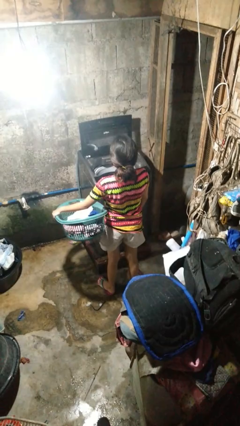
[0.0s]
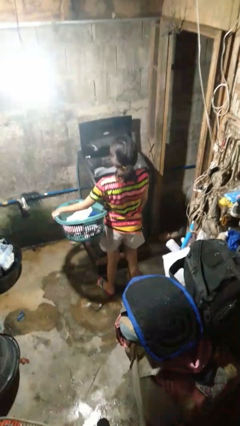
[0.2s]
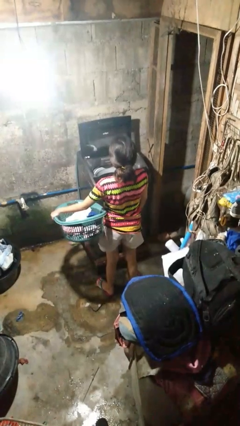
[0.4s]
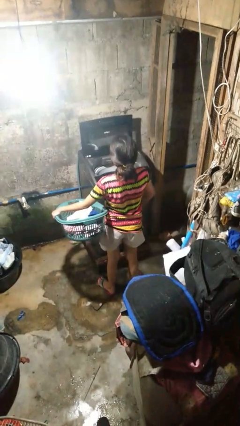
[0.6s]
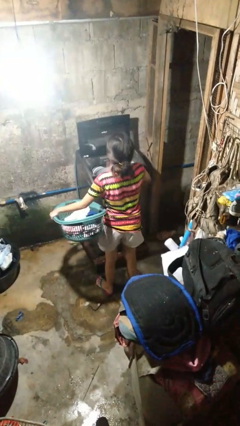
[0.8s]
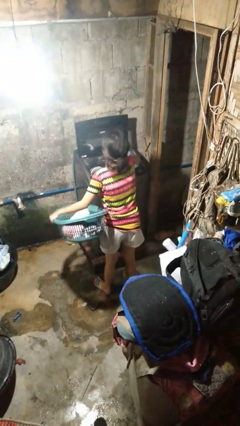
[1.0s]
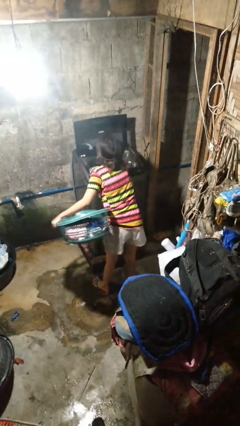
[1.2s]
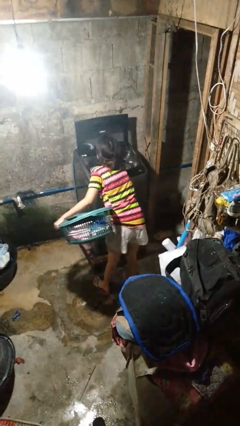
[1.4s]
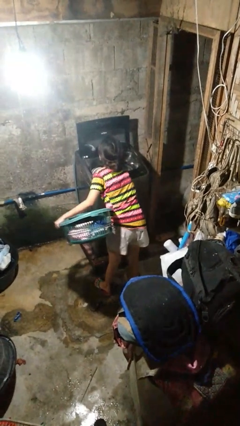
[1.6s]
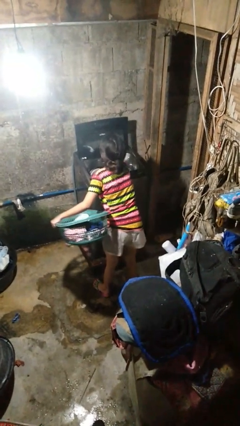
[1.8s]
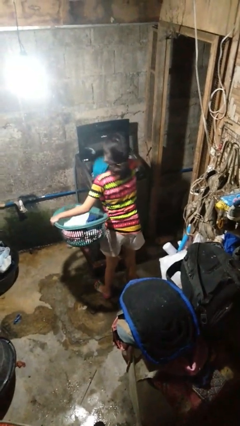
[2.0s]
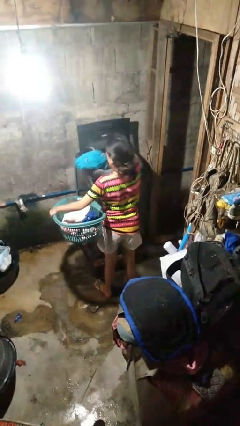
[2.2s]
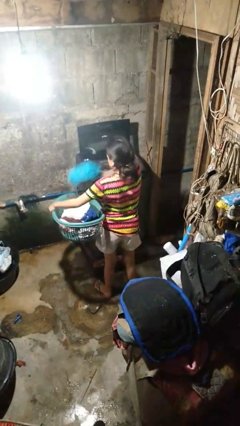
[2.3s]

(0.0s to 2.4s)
person unloads clotheswasher

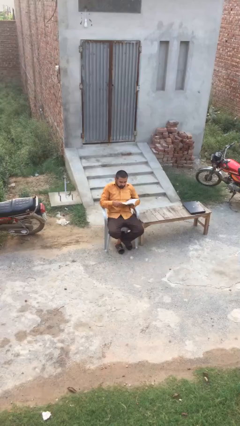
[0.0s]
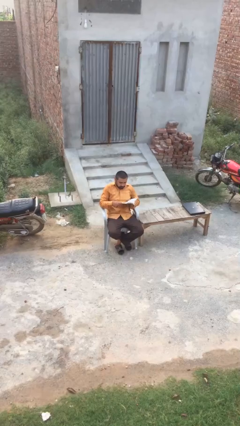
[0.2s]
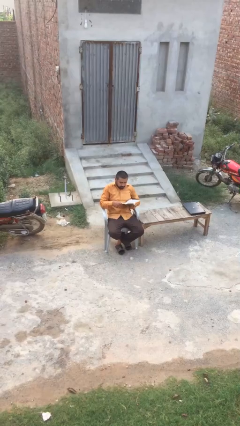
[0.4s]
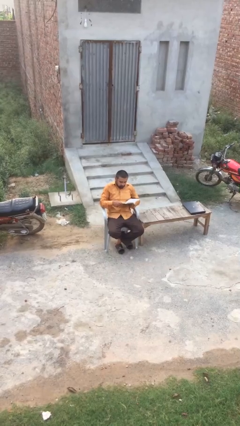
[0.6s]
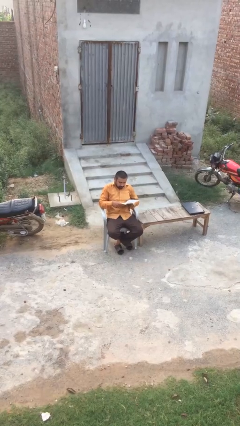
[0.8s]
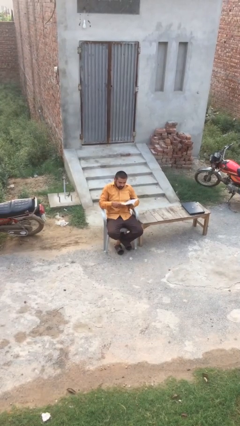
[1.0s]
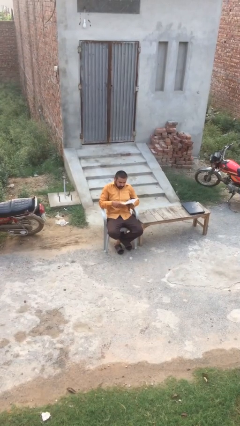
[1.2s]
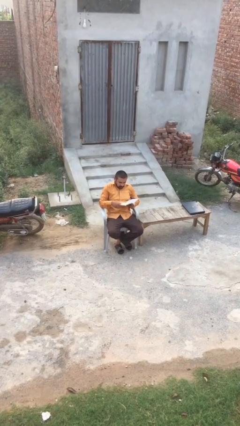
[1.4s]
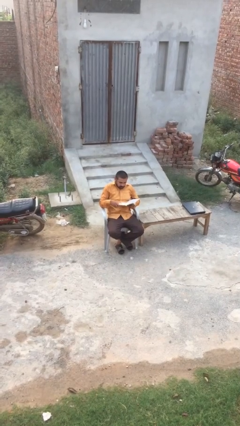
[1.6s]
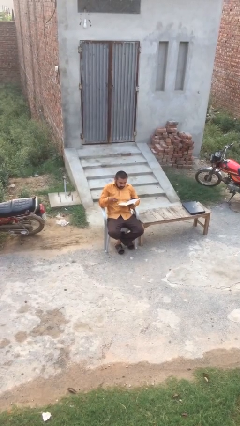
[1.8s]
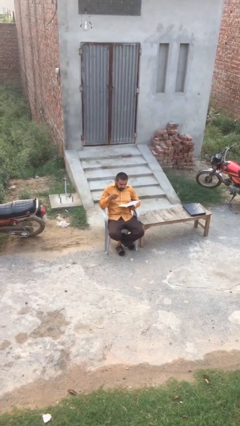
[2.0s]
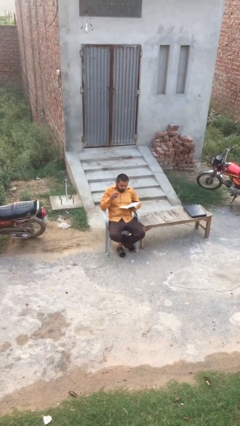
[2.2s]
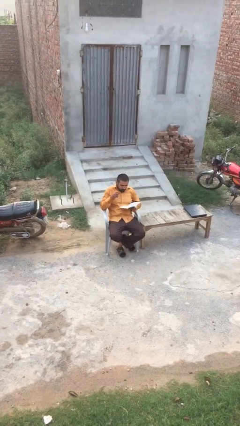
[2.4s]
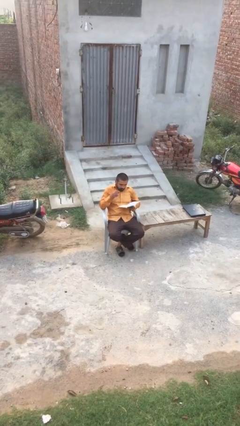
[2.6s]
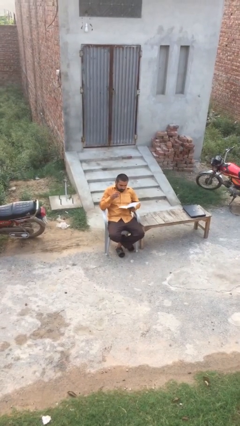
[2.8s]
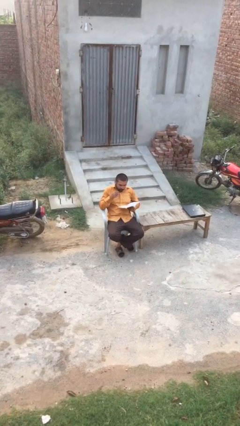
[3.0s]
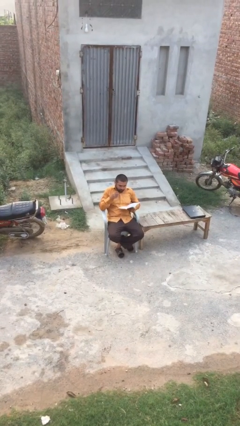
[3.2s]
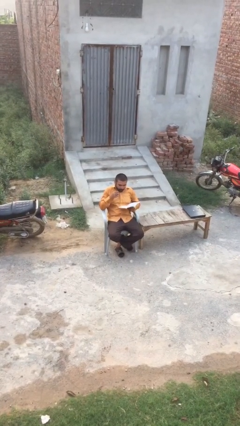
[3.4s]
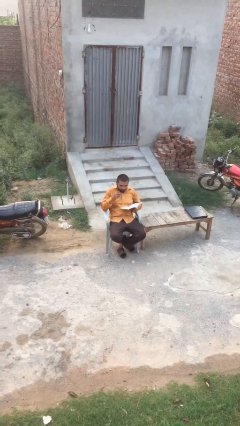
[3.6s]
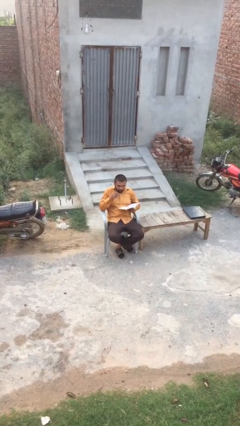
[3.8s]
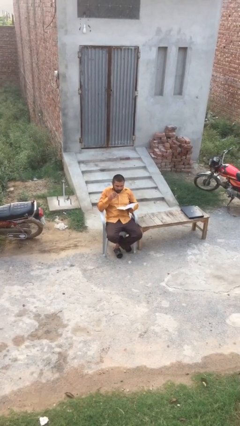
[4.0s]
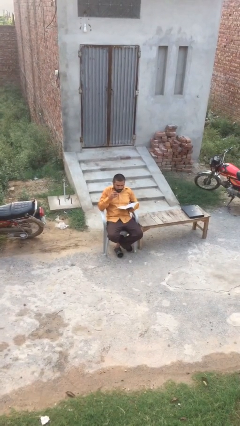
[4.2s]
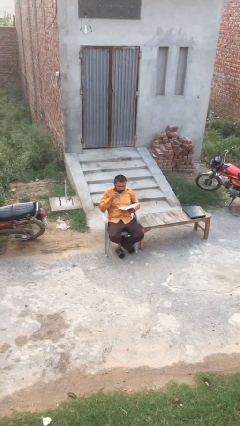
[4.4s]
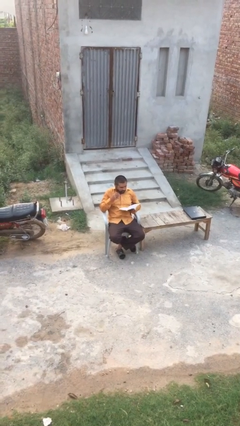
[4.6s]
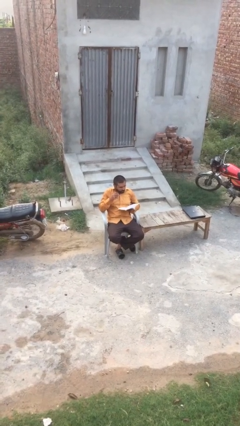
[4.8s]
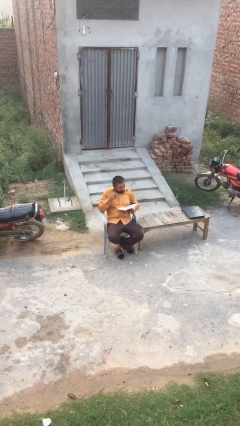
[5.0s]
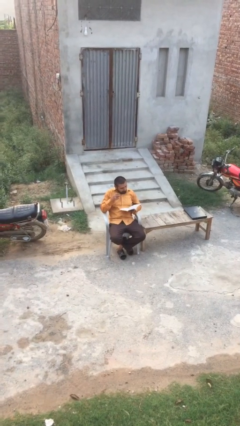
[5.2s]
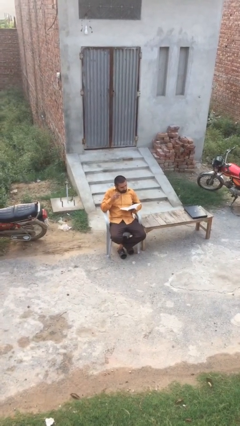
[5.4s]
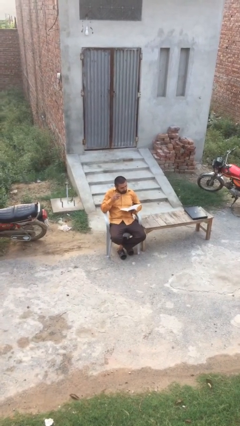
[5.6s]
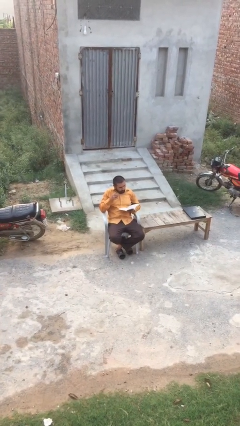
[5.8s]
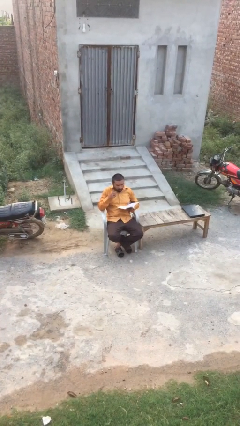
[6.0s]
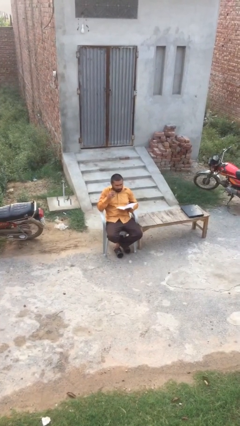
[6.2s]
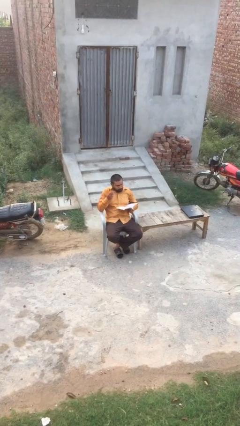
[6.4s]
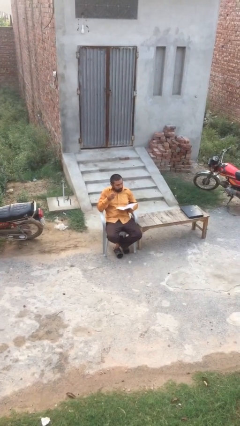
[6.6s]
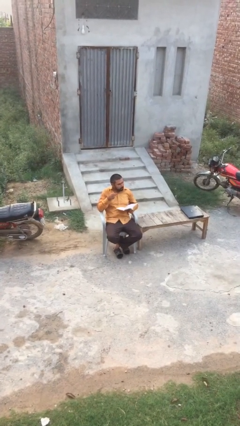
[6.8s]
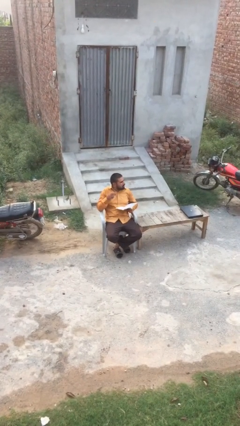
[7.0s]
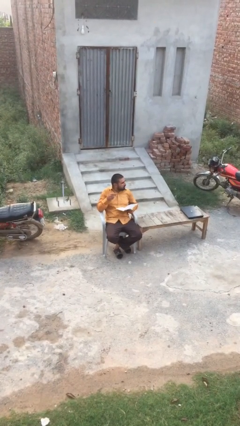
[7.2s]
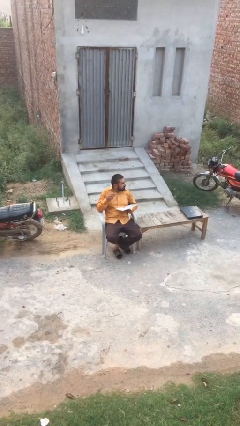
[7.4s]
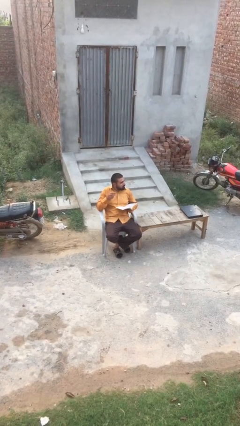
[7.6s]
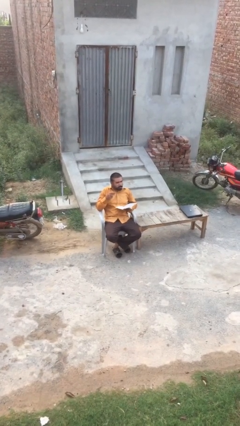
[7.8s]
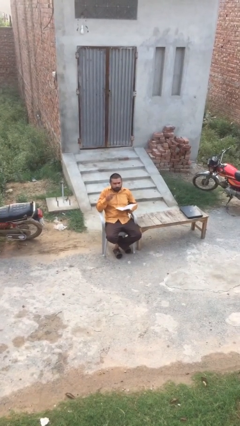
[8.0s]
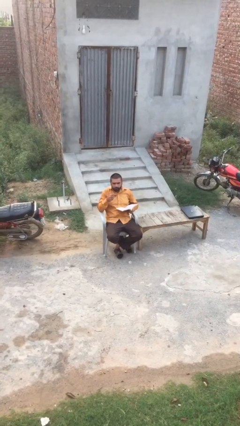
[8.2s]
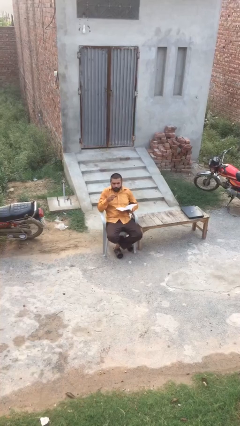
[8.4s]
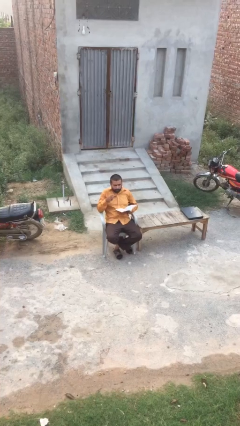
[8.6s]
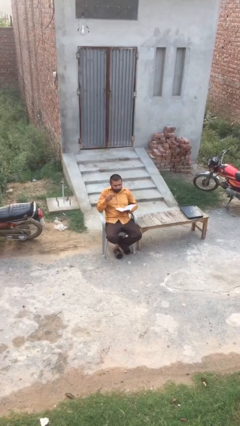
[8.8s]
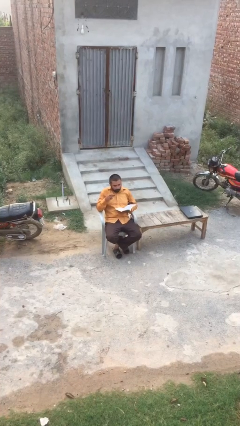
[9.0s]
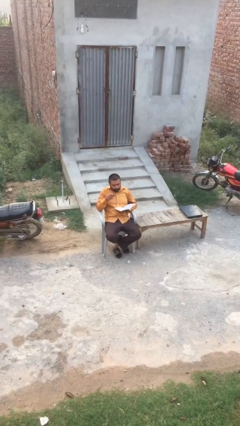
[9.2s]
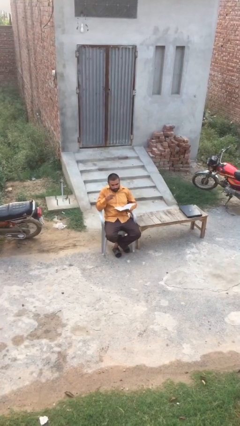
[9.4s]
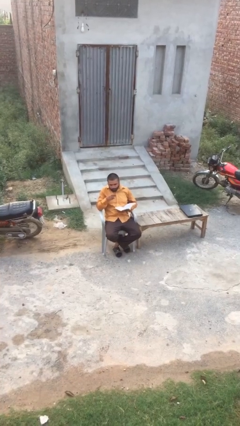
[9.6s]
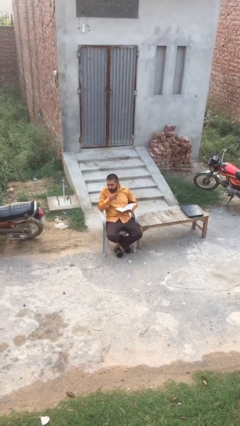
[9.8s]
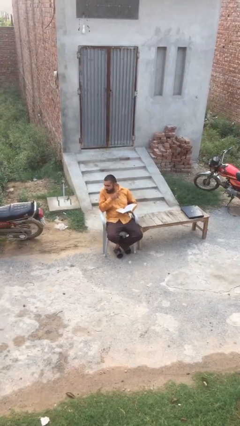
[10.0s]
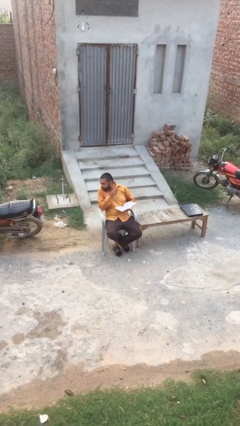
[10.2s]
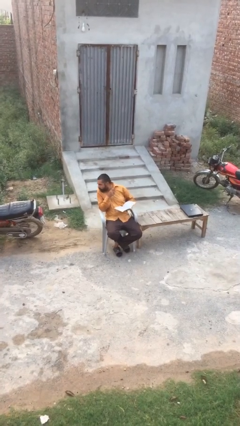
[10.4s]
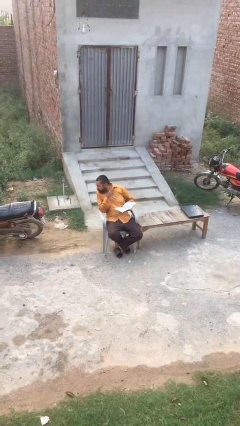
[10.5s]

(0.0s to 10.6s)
person reads document

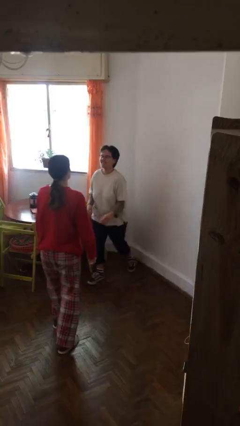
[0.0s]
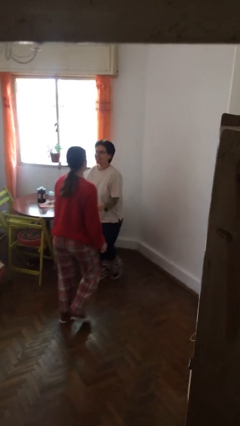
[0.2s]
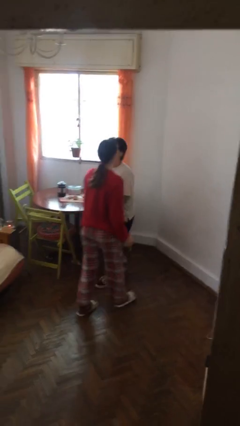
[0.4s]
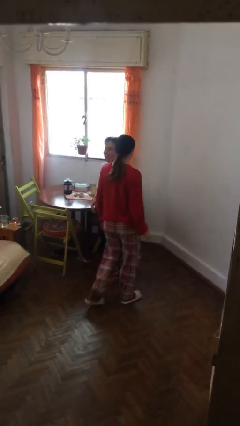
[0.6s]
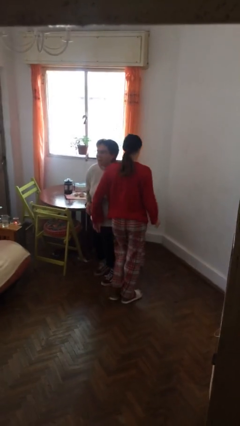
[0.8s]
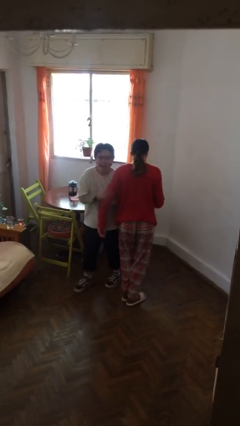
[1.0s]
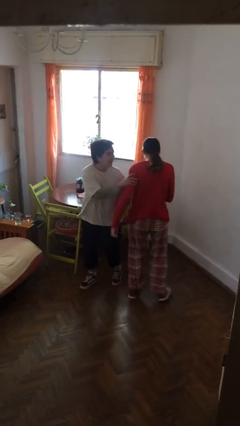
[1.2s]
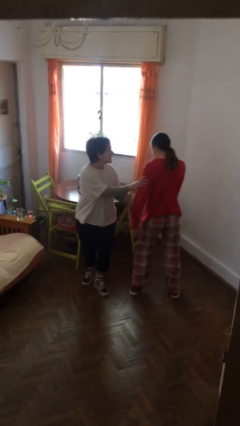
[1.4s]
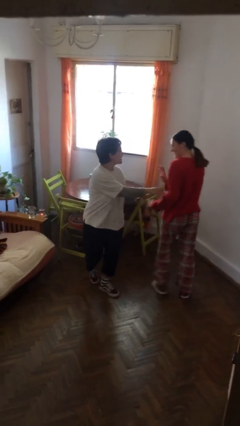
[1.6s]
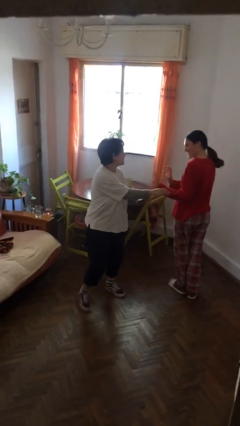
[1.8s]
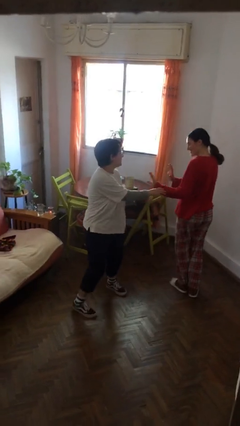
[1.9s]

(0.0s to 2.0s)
person bumps into person

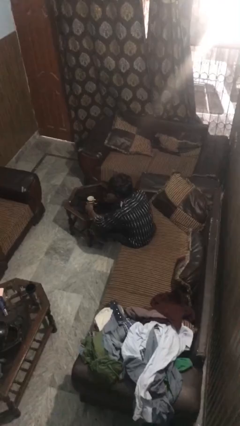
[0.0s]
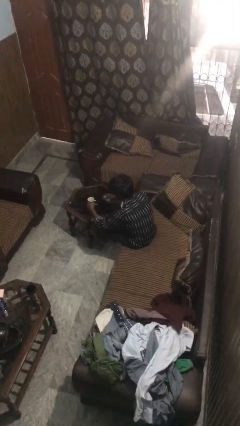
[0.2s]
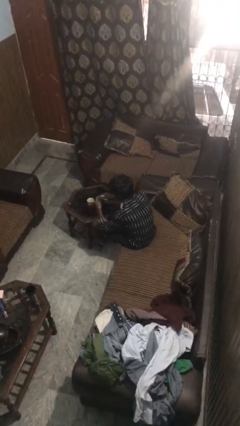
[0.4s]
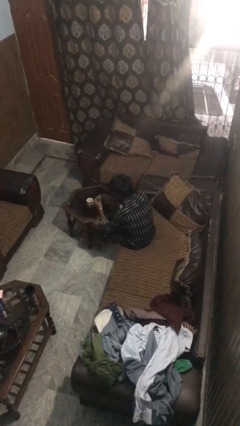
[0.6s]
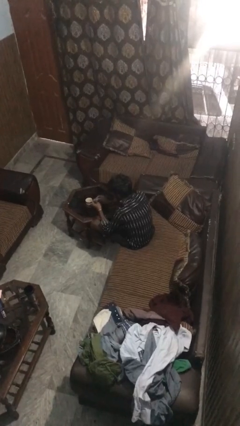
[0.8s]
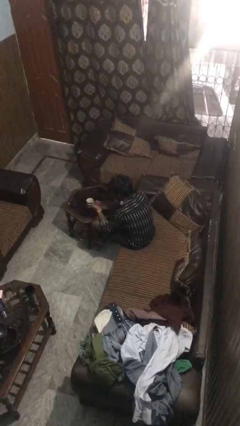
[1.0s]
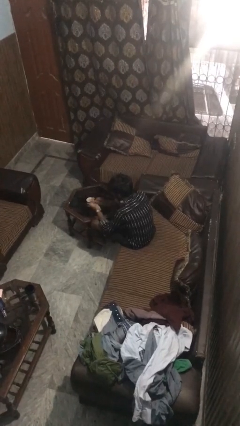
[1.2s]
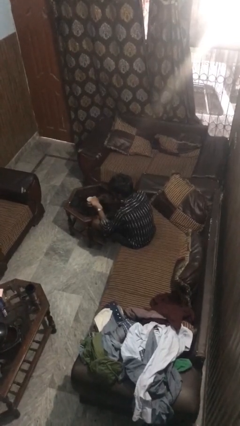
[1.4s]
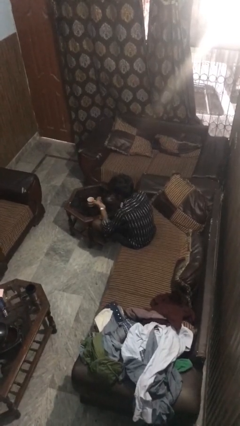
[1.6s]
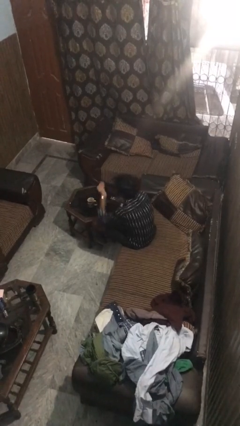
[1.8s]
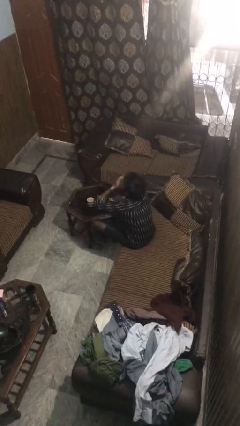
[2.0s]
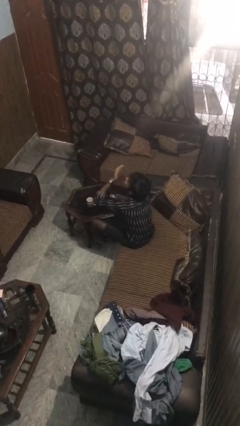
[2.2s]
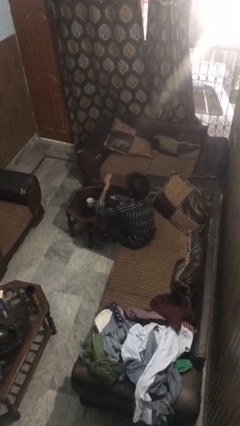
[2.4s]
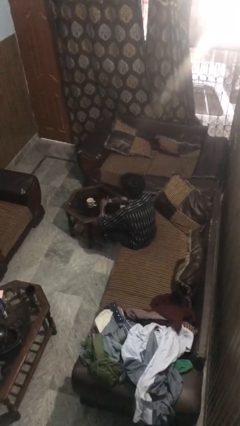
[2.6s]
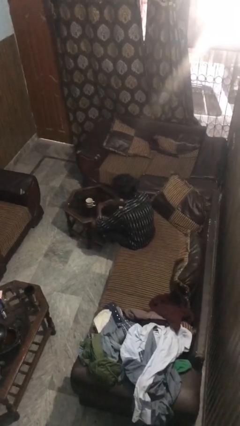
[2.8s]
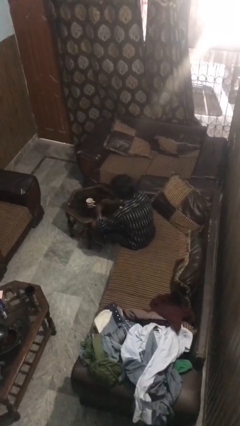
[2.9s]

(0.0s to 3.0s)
person takes medicine pills
